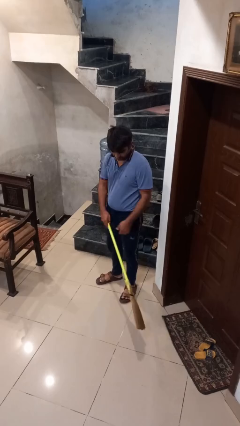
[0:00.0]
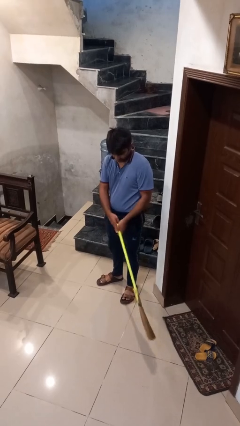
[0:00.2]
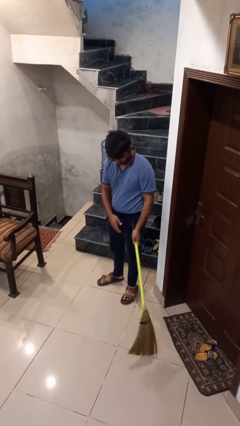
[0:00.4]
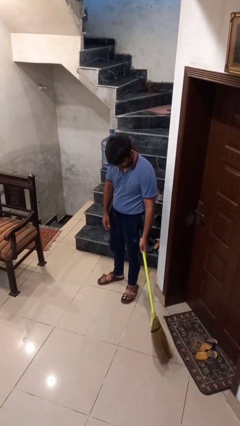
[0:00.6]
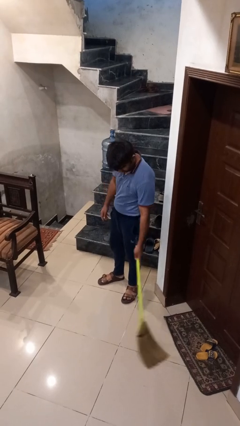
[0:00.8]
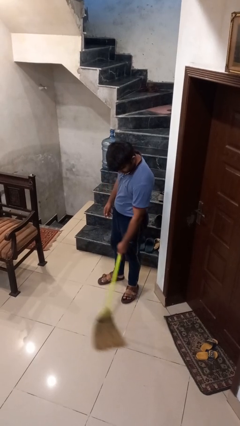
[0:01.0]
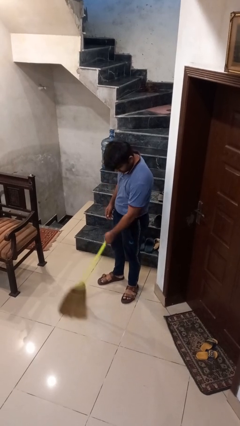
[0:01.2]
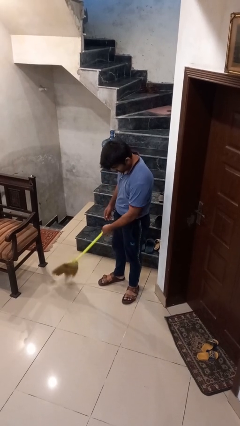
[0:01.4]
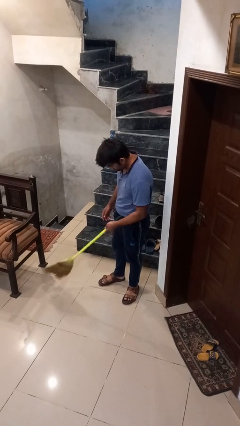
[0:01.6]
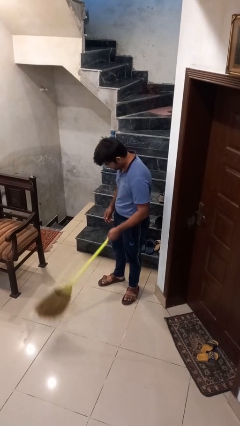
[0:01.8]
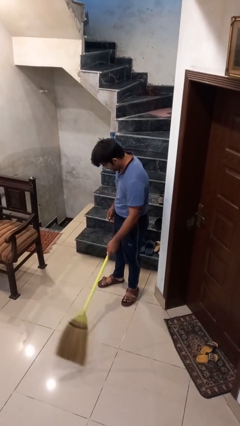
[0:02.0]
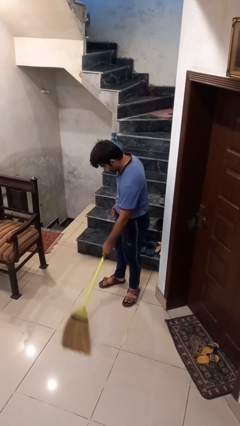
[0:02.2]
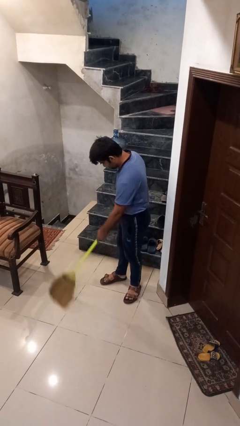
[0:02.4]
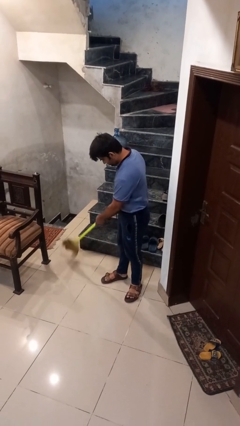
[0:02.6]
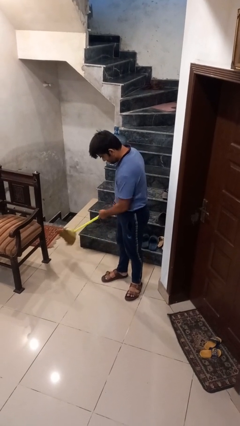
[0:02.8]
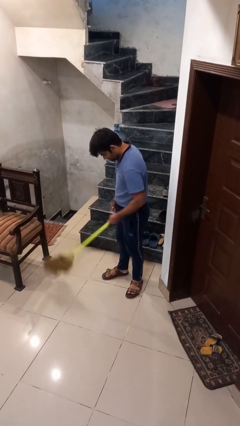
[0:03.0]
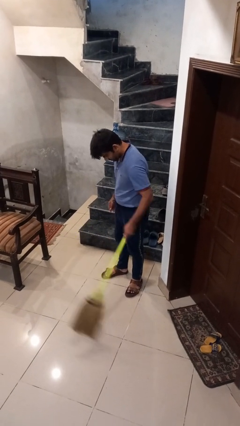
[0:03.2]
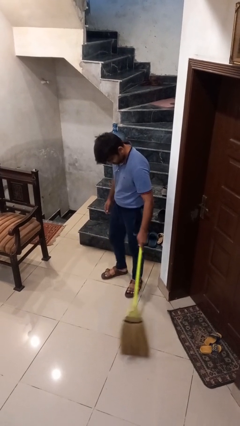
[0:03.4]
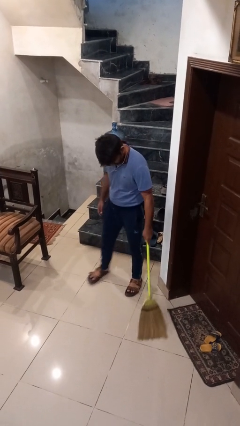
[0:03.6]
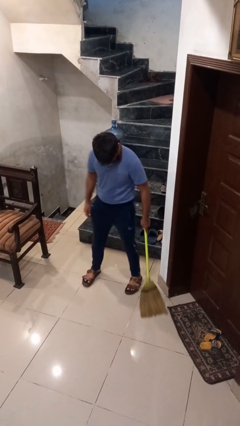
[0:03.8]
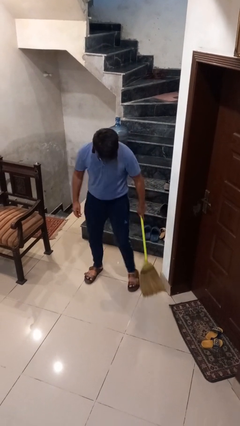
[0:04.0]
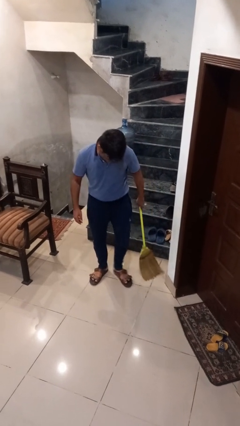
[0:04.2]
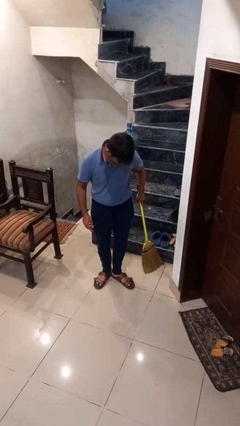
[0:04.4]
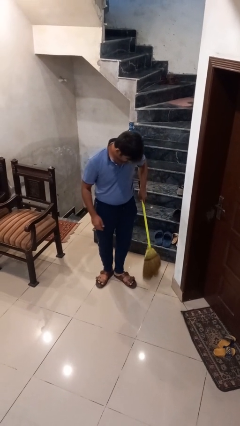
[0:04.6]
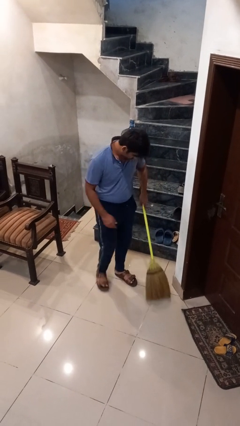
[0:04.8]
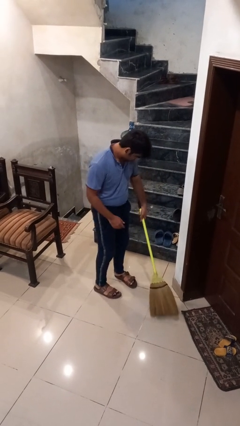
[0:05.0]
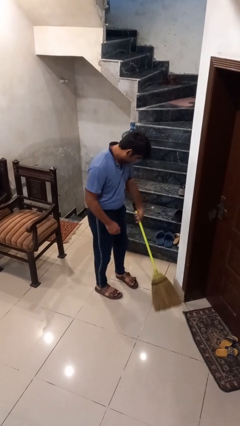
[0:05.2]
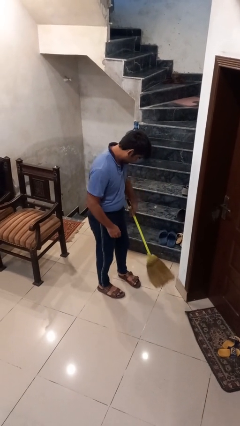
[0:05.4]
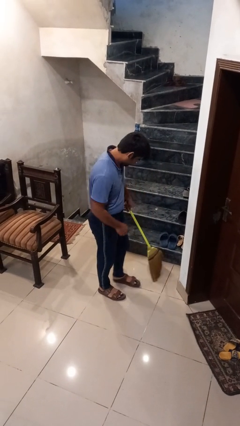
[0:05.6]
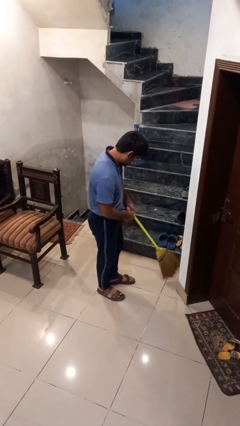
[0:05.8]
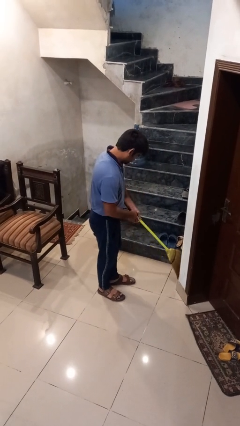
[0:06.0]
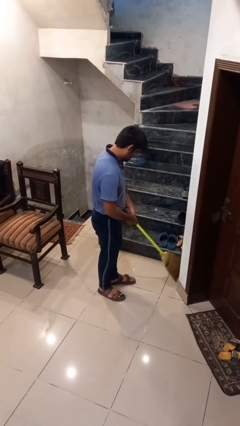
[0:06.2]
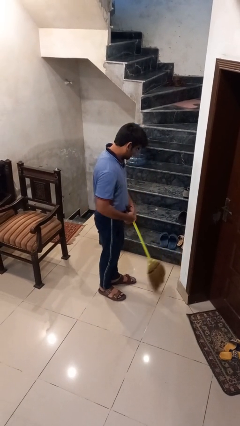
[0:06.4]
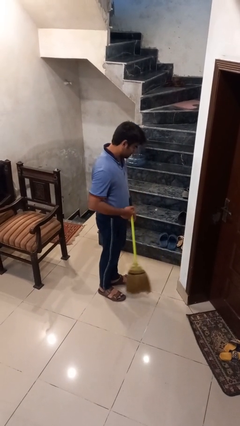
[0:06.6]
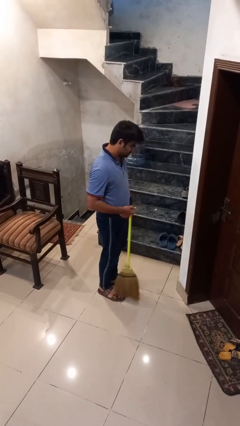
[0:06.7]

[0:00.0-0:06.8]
person sweeps floor

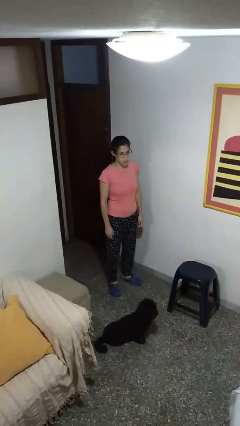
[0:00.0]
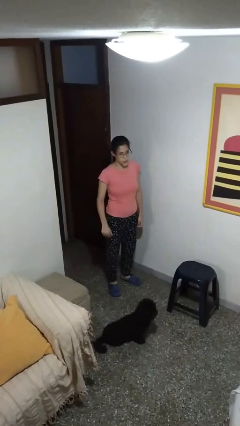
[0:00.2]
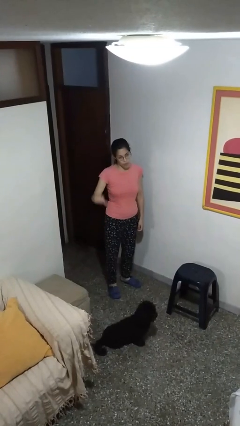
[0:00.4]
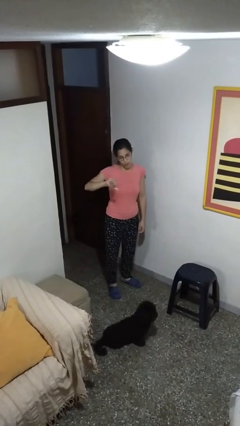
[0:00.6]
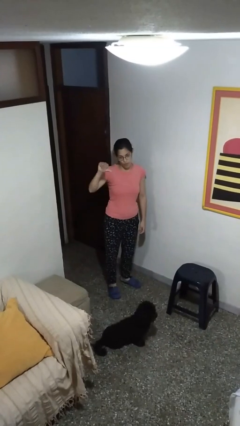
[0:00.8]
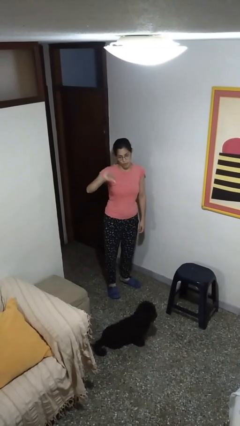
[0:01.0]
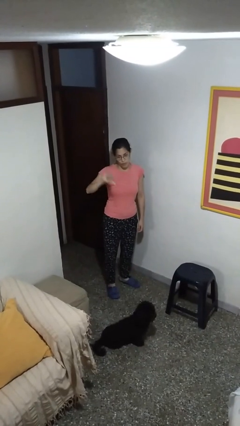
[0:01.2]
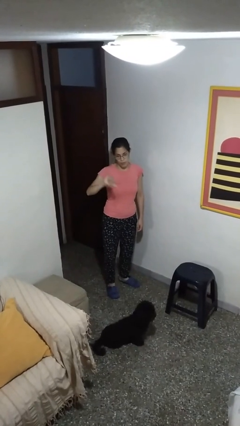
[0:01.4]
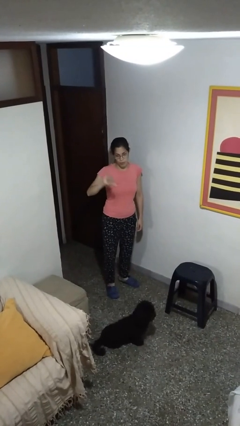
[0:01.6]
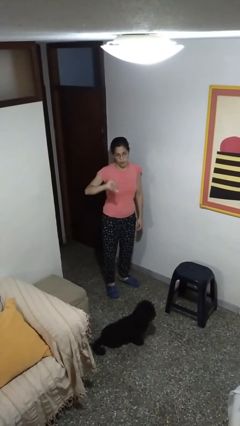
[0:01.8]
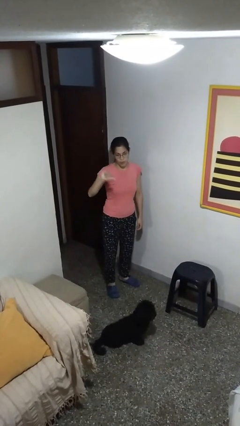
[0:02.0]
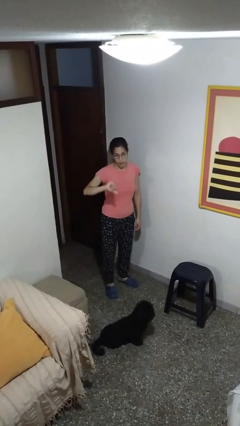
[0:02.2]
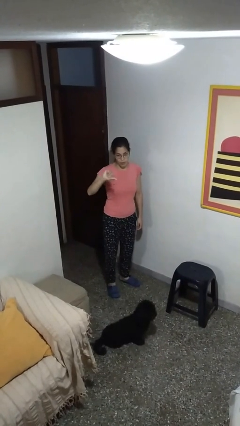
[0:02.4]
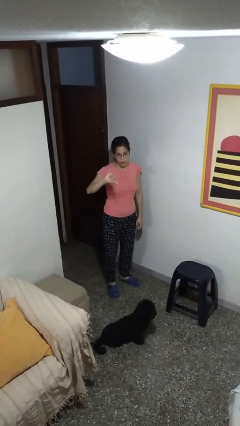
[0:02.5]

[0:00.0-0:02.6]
person gestures thumbs down

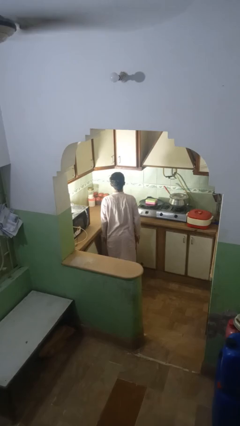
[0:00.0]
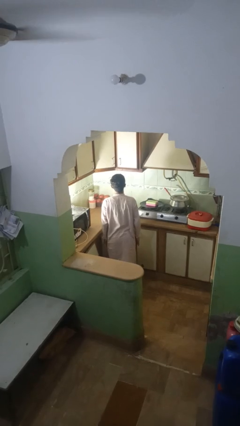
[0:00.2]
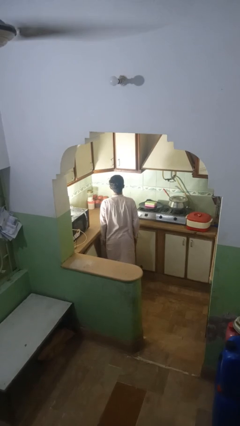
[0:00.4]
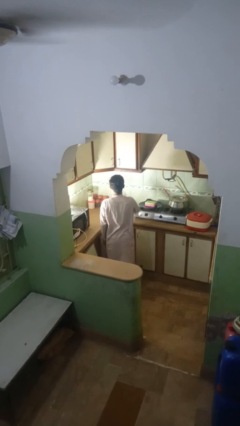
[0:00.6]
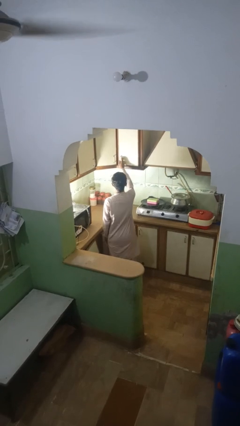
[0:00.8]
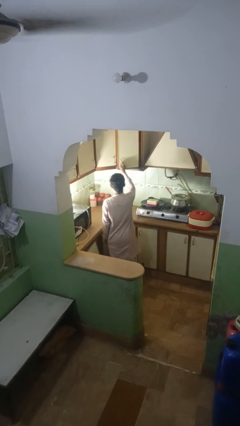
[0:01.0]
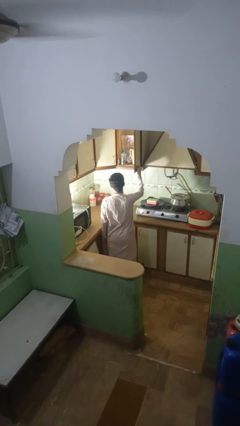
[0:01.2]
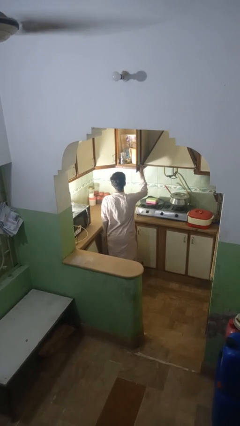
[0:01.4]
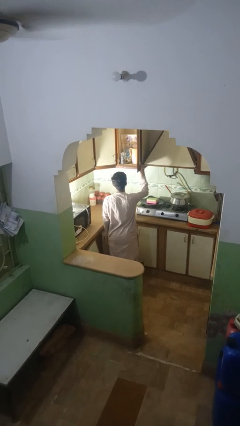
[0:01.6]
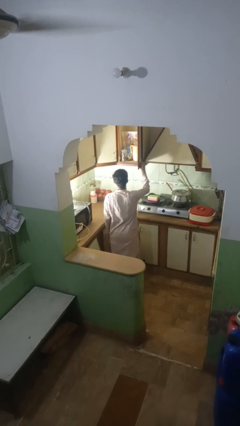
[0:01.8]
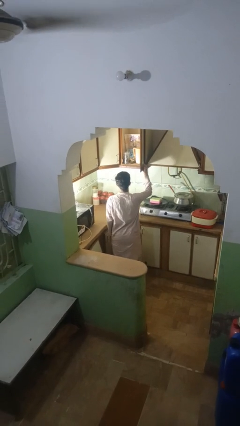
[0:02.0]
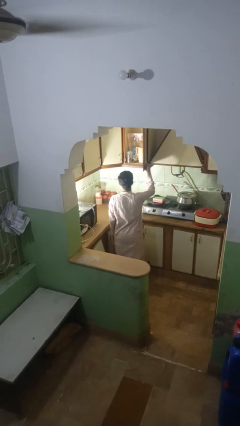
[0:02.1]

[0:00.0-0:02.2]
person opens kitchen drawer

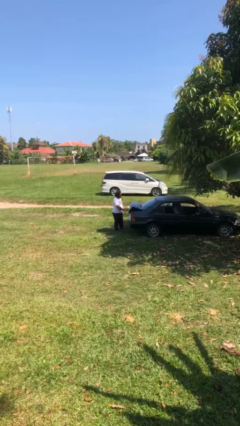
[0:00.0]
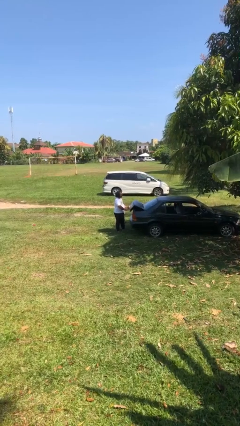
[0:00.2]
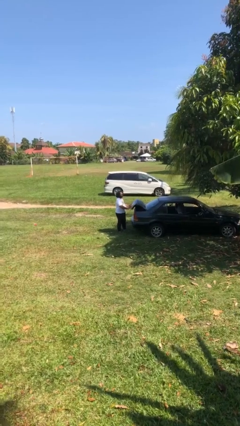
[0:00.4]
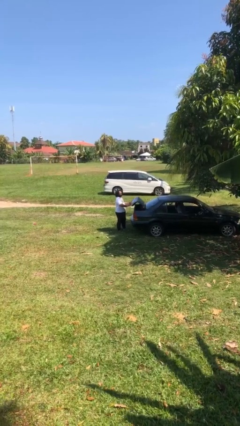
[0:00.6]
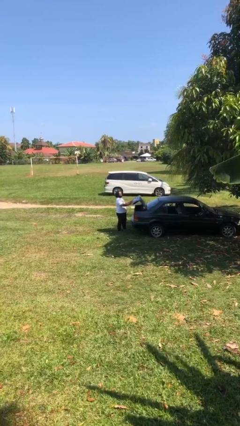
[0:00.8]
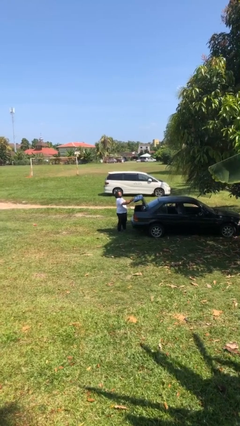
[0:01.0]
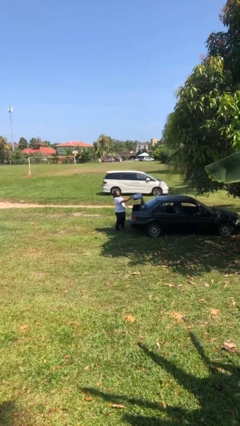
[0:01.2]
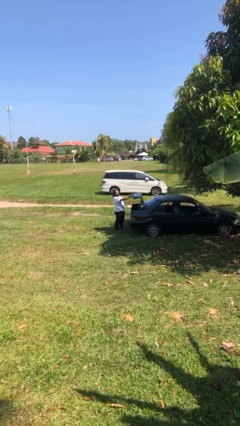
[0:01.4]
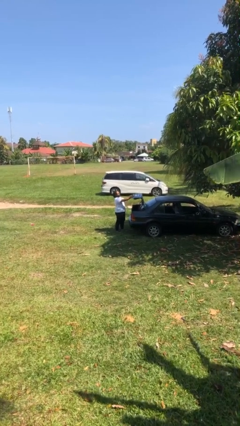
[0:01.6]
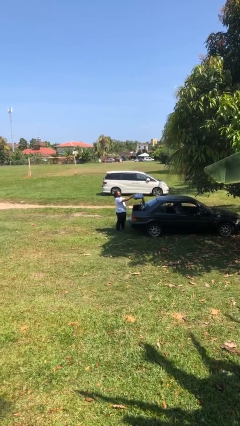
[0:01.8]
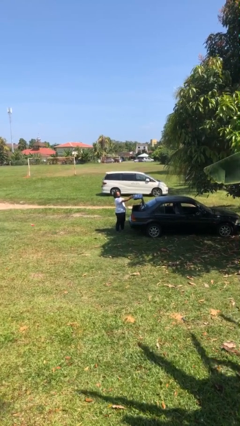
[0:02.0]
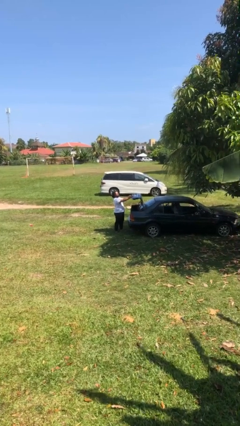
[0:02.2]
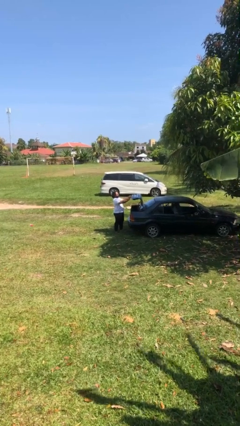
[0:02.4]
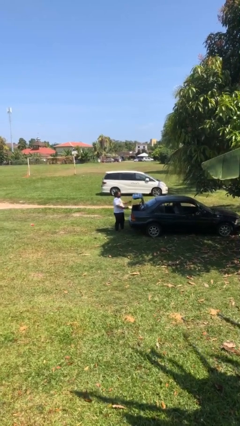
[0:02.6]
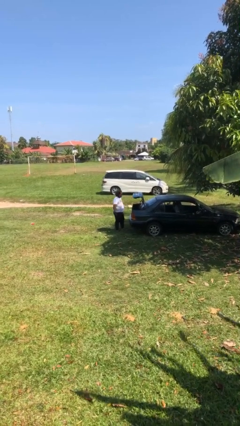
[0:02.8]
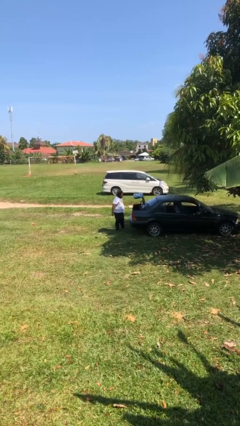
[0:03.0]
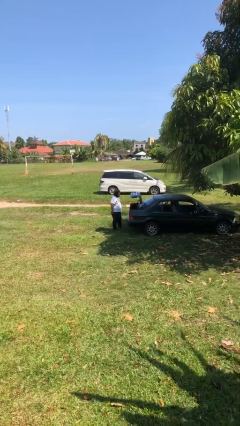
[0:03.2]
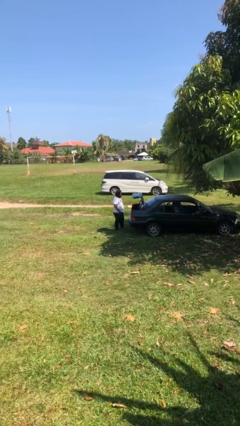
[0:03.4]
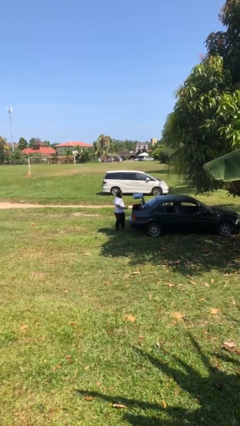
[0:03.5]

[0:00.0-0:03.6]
person opens car trunk

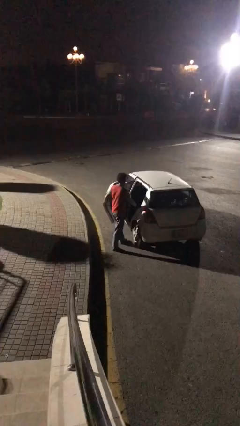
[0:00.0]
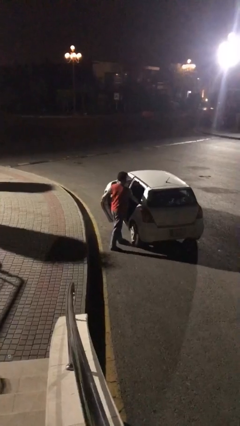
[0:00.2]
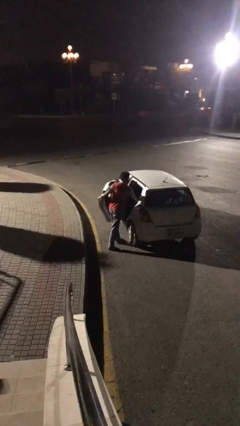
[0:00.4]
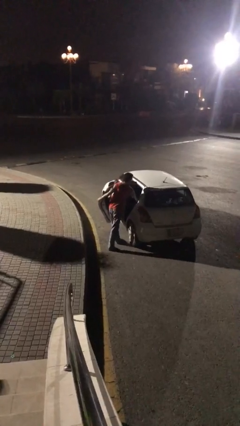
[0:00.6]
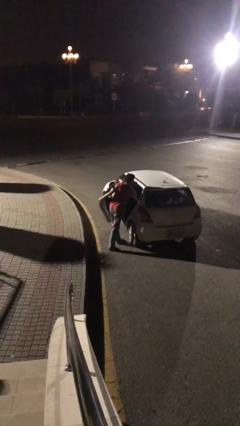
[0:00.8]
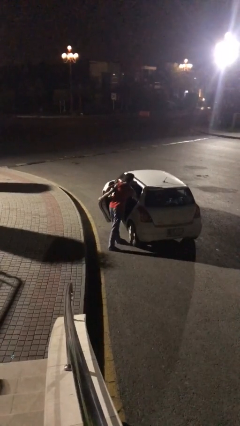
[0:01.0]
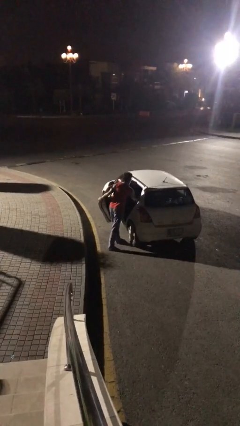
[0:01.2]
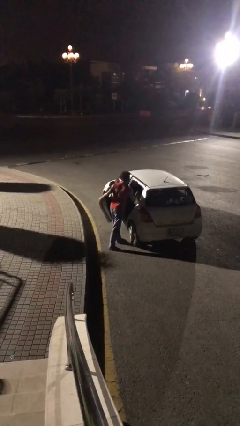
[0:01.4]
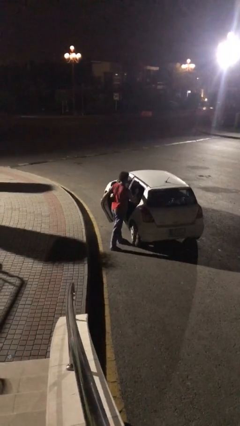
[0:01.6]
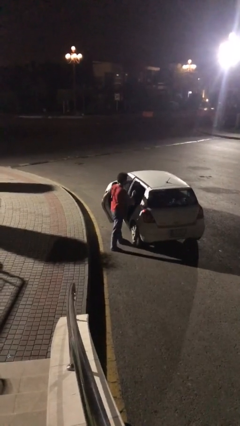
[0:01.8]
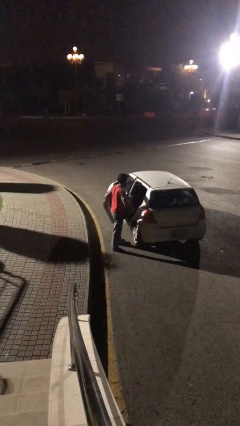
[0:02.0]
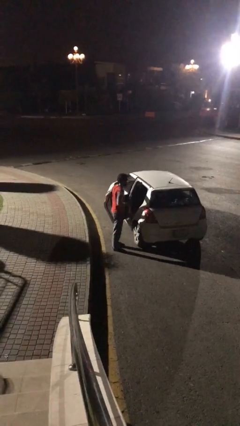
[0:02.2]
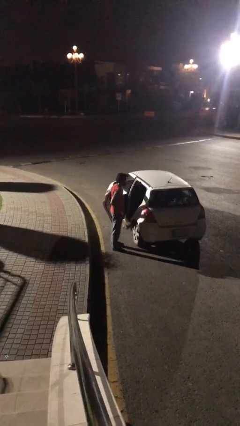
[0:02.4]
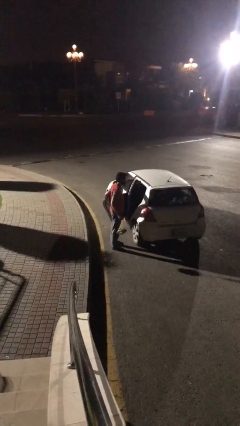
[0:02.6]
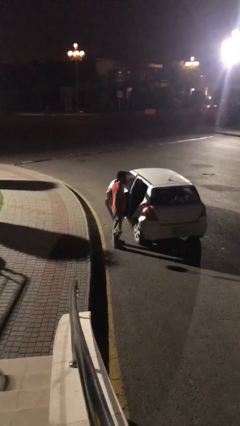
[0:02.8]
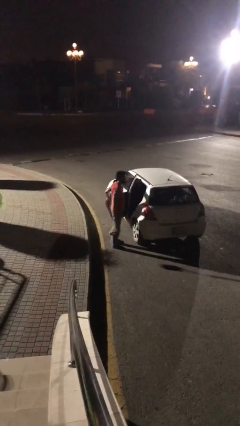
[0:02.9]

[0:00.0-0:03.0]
person unloads car
